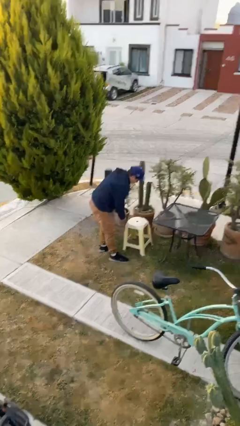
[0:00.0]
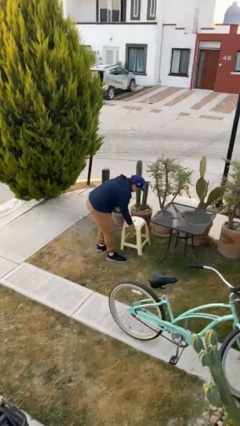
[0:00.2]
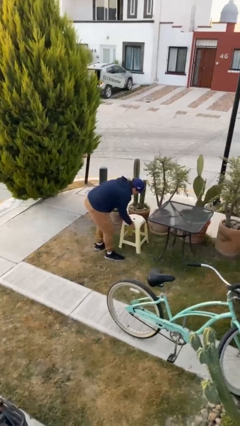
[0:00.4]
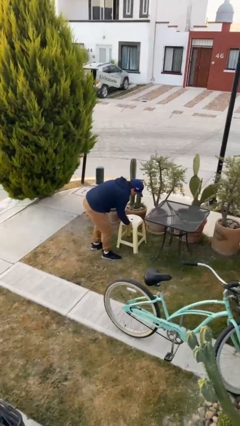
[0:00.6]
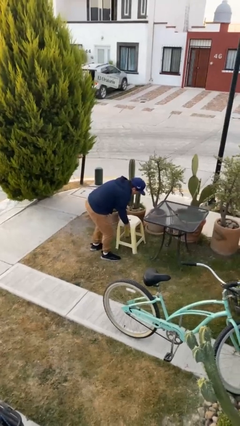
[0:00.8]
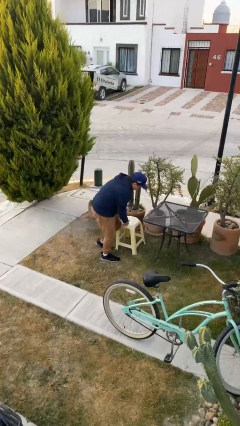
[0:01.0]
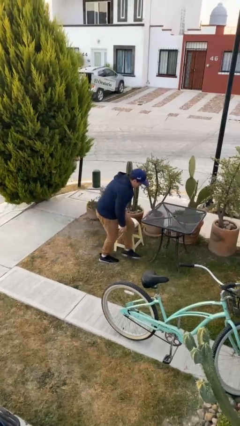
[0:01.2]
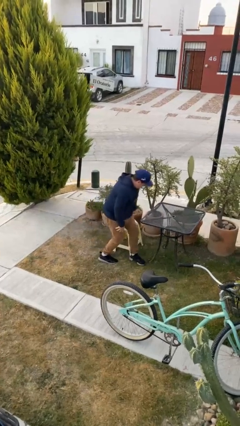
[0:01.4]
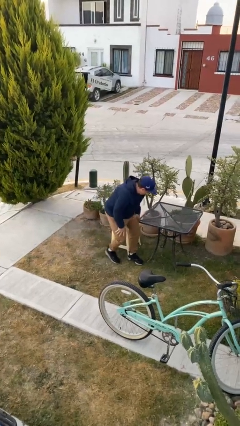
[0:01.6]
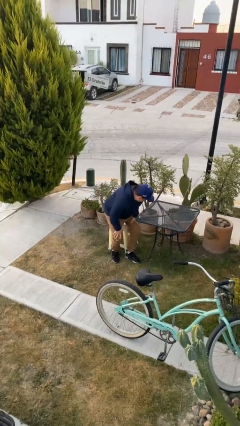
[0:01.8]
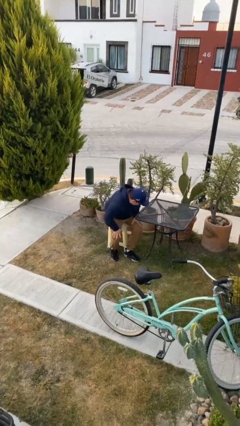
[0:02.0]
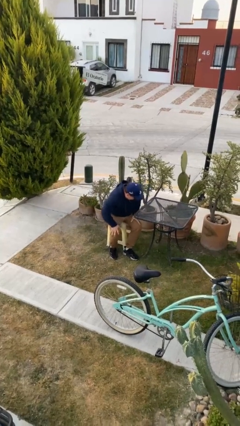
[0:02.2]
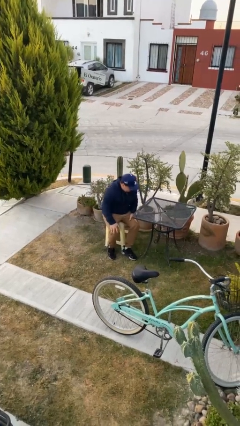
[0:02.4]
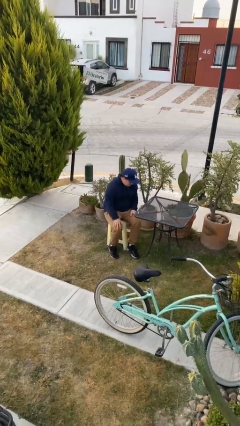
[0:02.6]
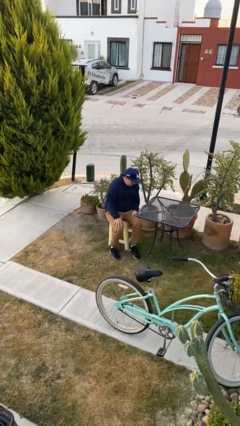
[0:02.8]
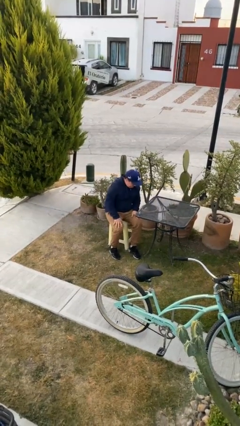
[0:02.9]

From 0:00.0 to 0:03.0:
person sits down

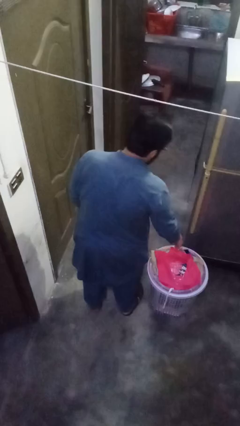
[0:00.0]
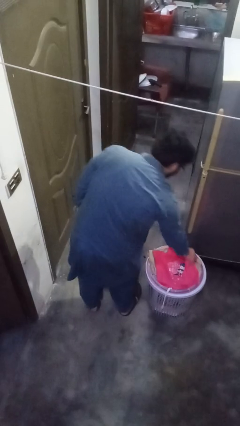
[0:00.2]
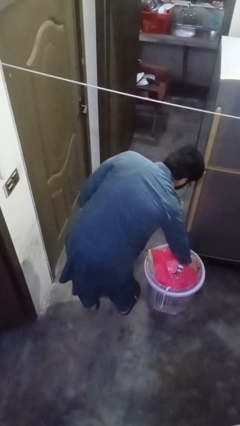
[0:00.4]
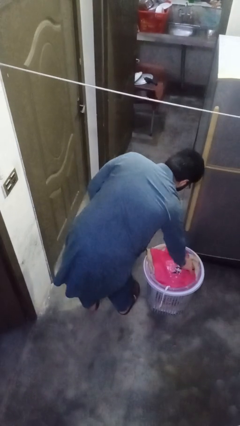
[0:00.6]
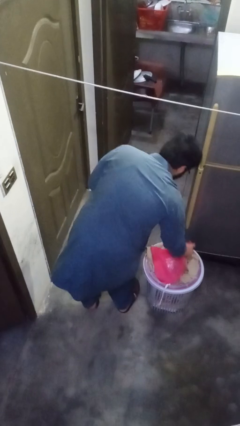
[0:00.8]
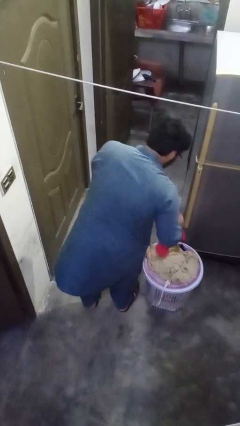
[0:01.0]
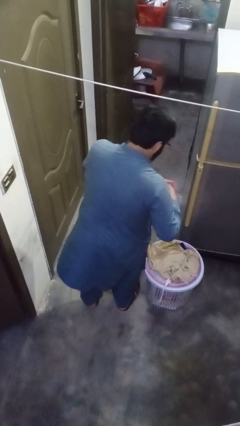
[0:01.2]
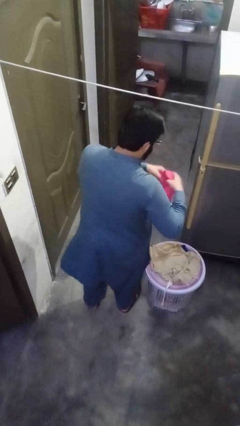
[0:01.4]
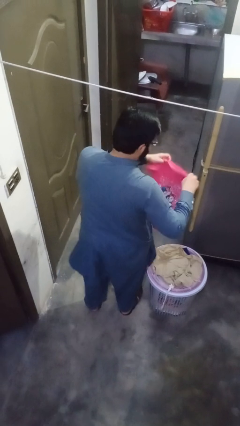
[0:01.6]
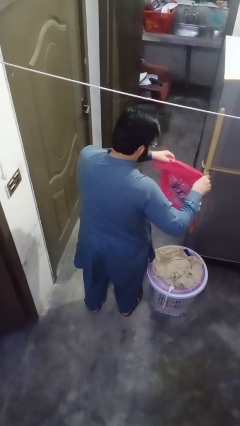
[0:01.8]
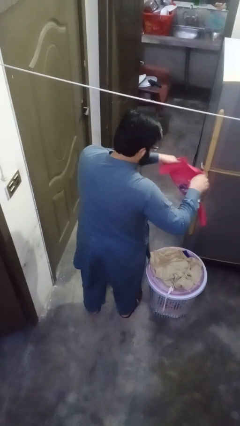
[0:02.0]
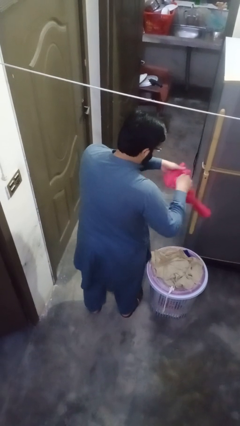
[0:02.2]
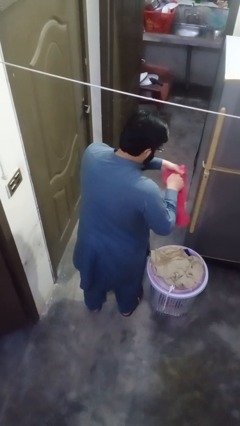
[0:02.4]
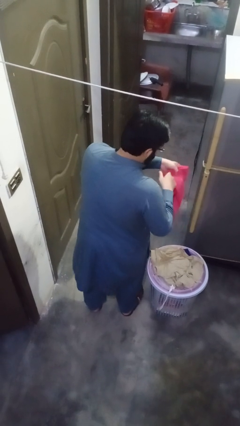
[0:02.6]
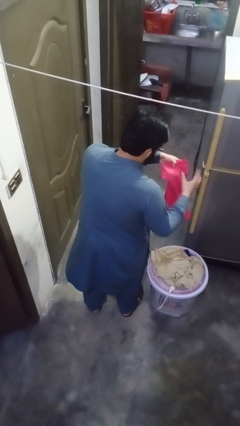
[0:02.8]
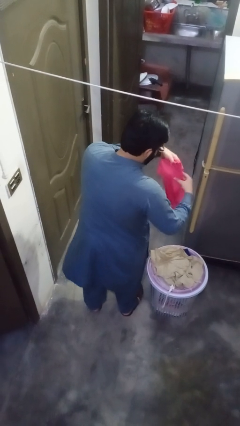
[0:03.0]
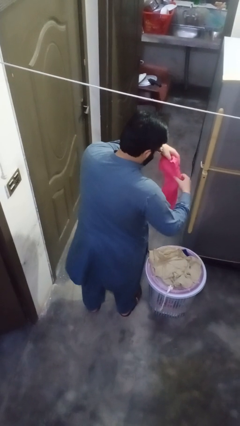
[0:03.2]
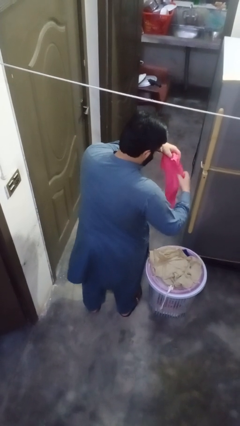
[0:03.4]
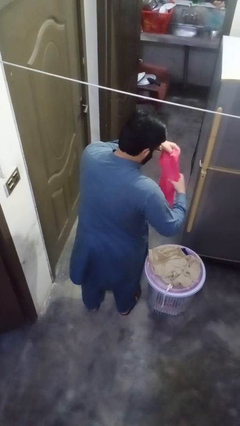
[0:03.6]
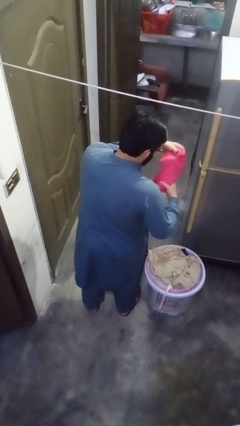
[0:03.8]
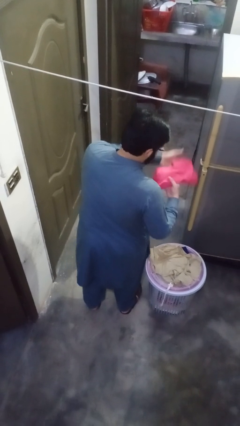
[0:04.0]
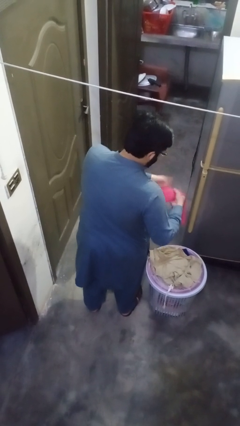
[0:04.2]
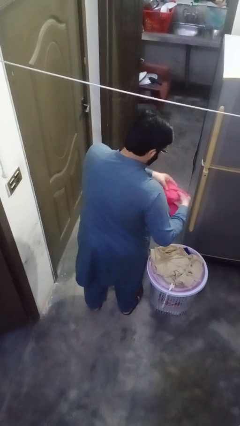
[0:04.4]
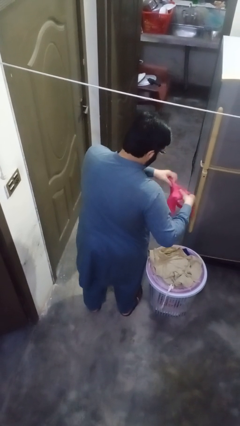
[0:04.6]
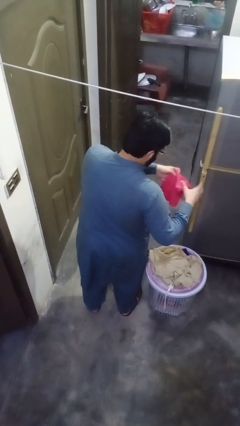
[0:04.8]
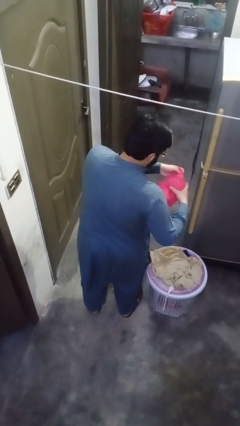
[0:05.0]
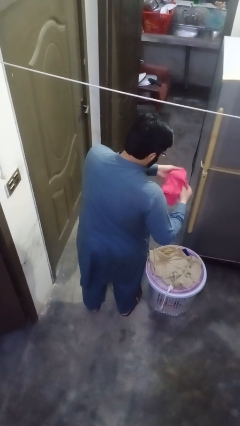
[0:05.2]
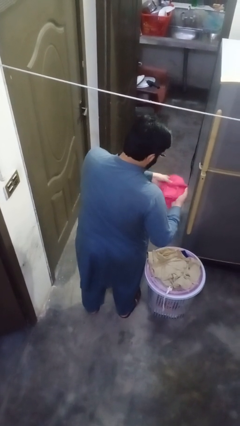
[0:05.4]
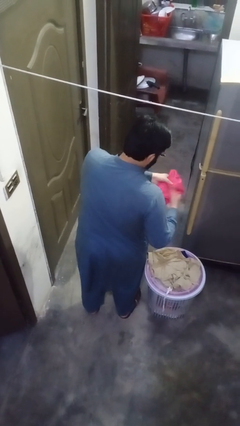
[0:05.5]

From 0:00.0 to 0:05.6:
person folds shirt

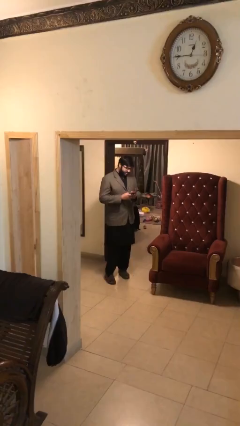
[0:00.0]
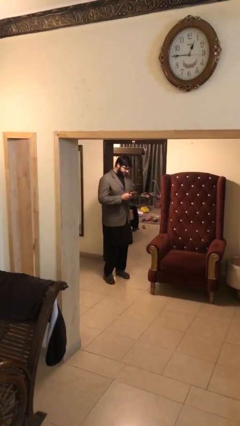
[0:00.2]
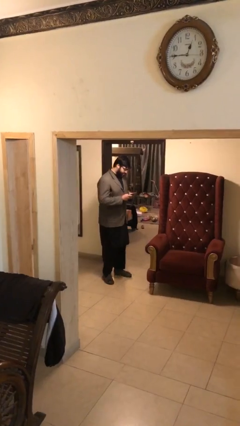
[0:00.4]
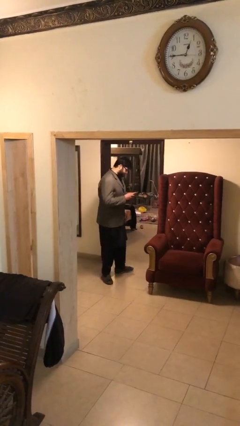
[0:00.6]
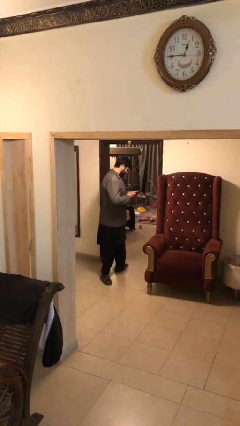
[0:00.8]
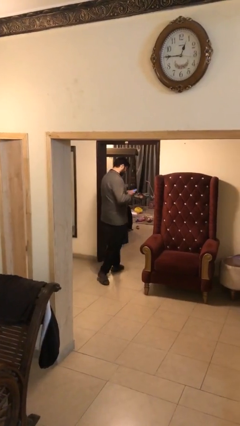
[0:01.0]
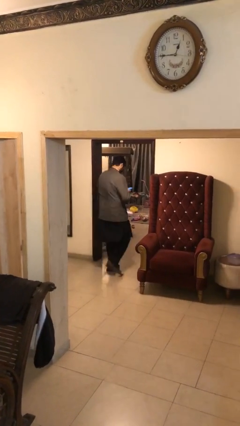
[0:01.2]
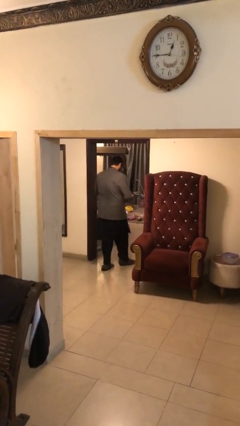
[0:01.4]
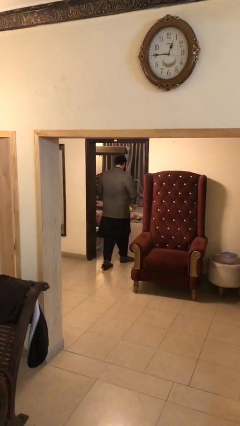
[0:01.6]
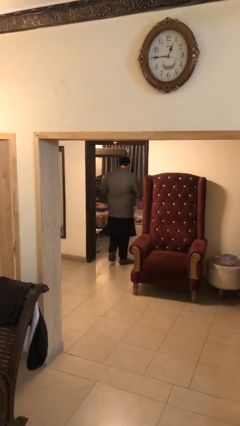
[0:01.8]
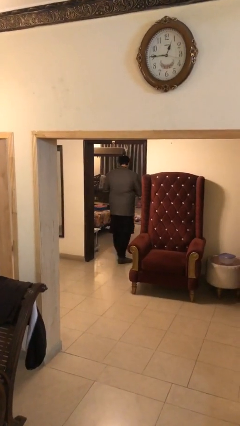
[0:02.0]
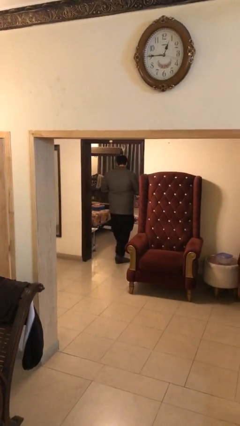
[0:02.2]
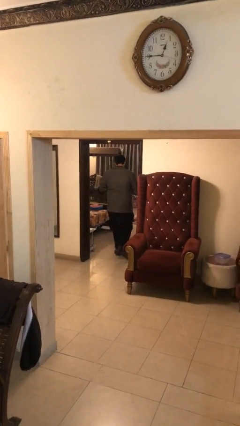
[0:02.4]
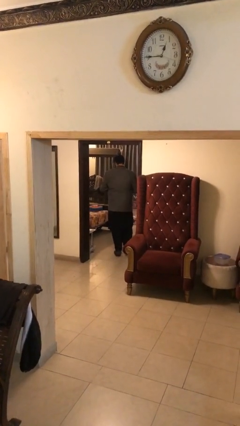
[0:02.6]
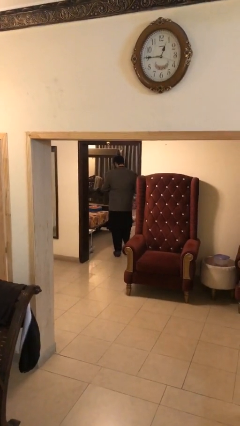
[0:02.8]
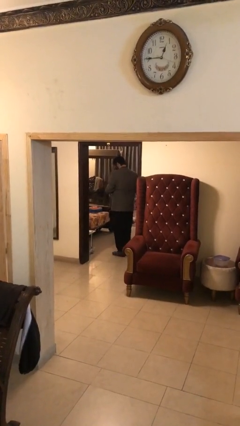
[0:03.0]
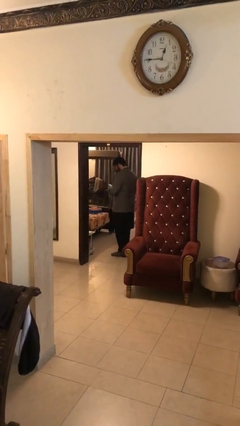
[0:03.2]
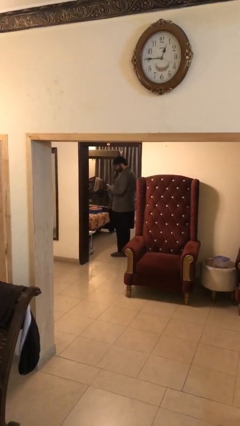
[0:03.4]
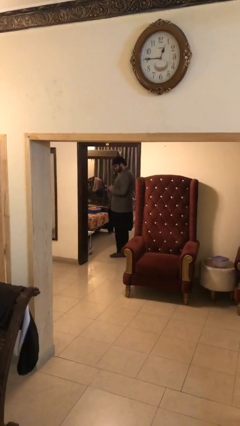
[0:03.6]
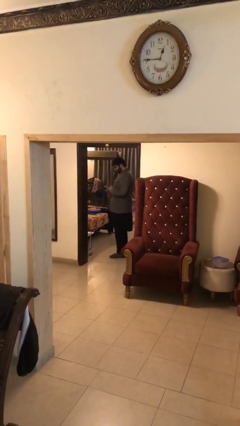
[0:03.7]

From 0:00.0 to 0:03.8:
person exits scene through structure

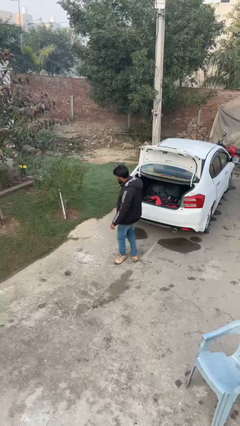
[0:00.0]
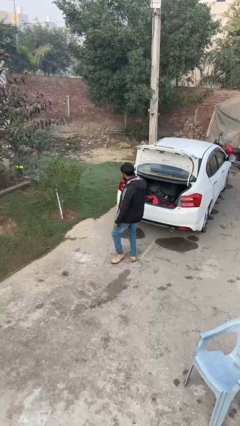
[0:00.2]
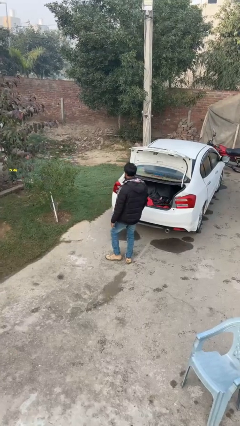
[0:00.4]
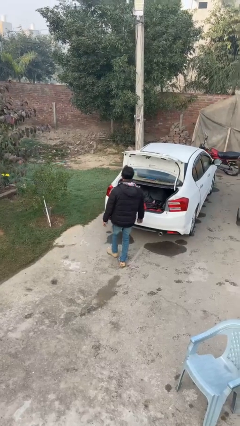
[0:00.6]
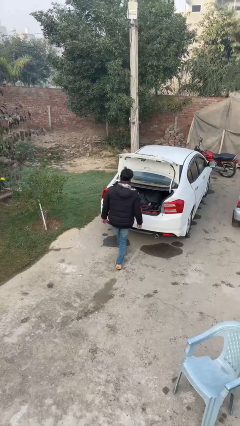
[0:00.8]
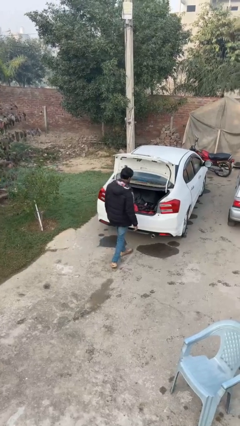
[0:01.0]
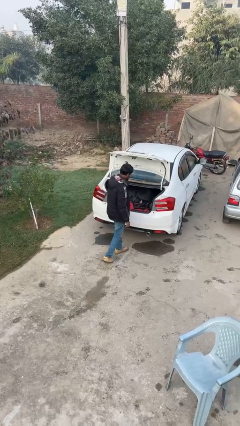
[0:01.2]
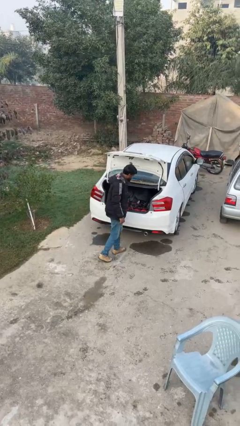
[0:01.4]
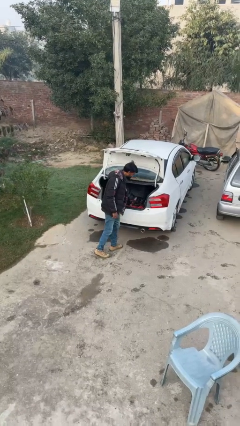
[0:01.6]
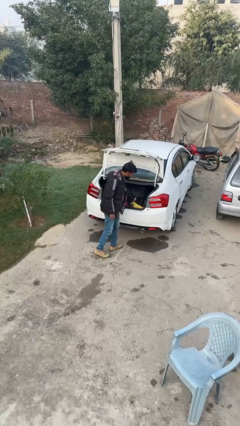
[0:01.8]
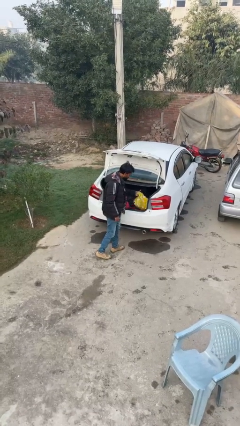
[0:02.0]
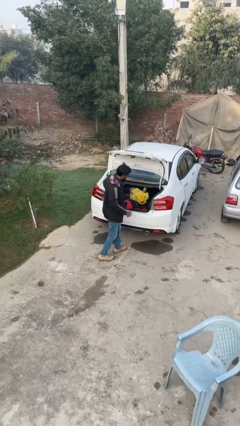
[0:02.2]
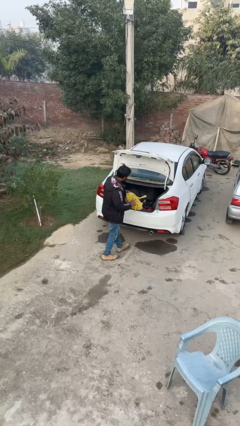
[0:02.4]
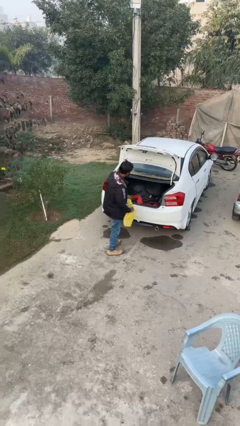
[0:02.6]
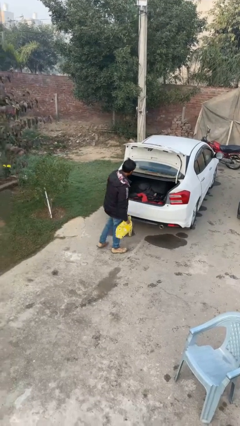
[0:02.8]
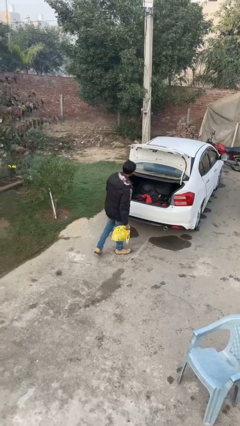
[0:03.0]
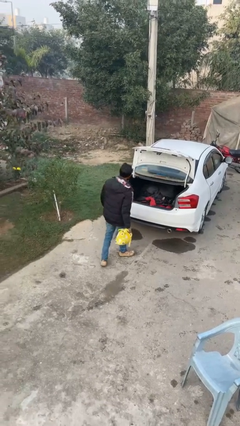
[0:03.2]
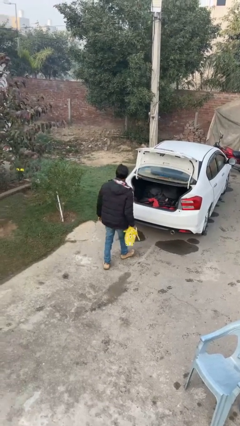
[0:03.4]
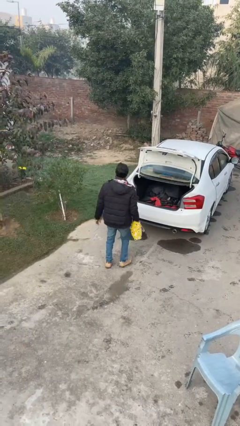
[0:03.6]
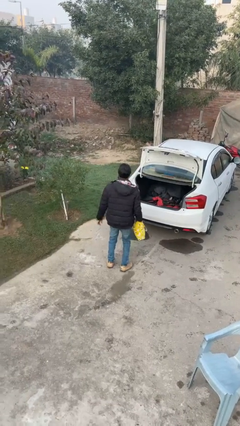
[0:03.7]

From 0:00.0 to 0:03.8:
person unloads car

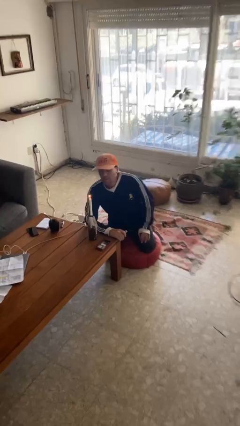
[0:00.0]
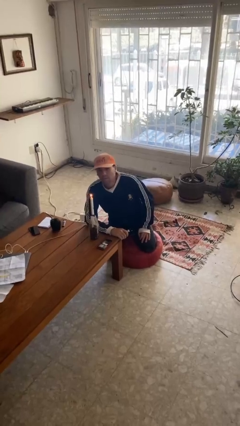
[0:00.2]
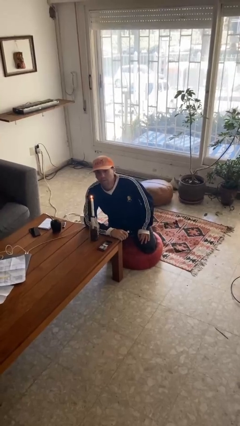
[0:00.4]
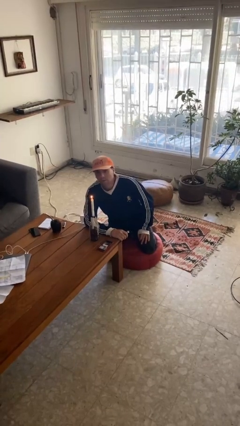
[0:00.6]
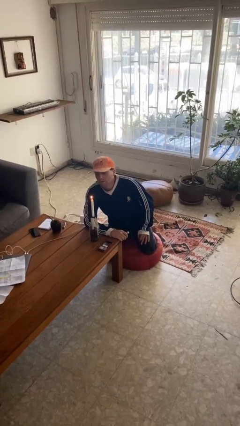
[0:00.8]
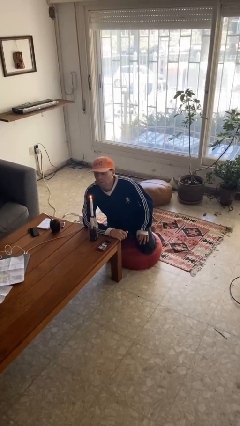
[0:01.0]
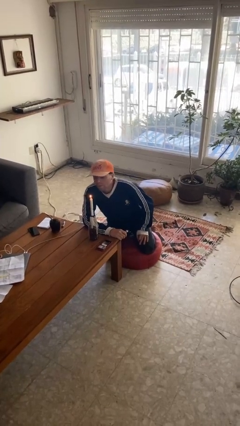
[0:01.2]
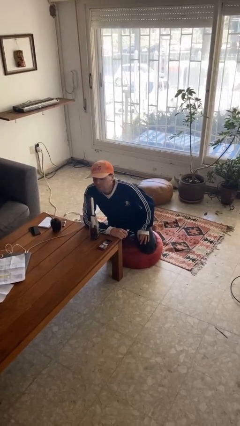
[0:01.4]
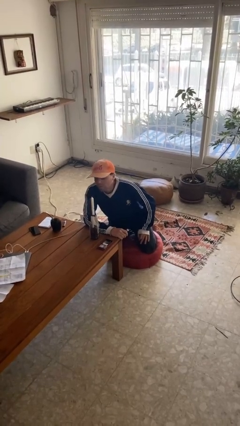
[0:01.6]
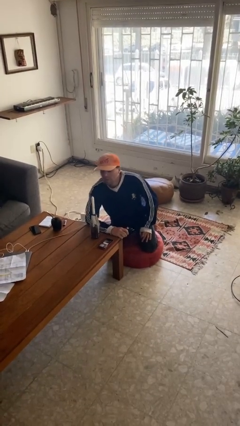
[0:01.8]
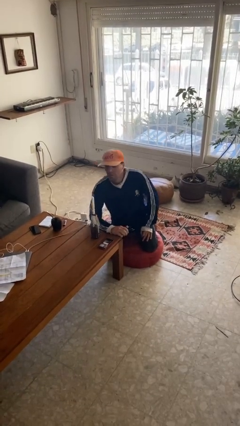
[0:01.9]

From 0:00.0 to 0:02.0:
person extinguishes candle
